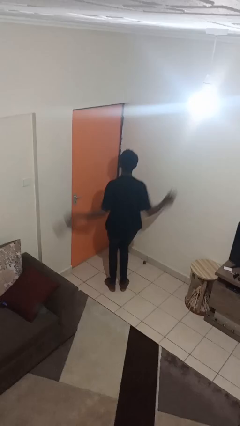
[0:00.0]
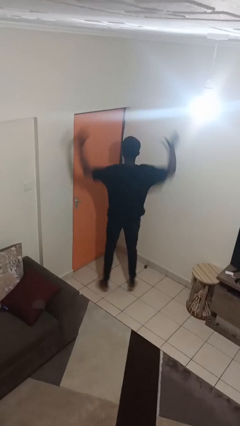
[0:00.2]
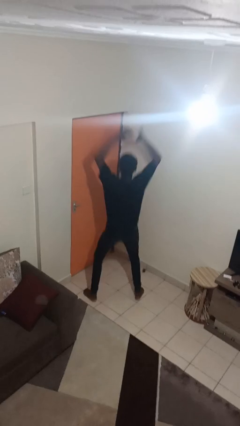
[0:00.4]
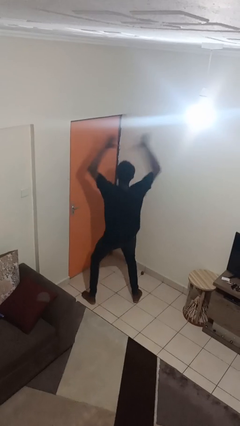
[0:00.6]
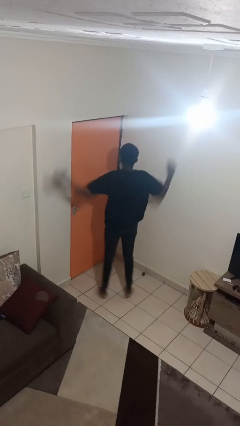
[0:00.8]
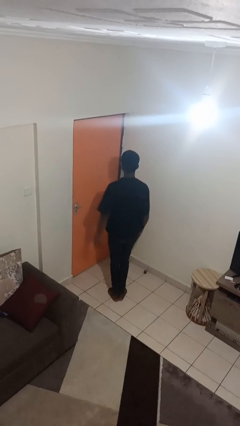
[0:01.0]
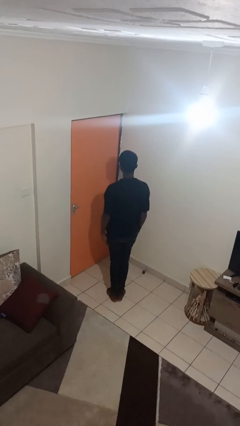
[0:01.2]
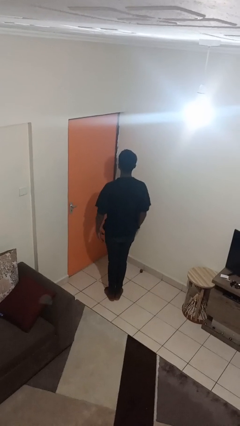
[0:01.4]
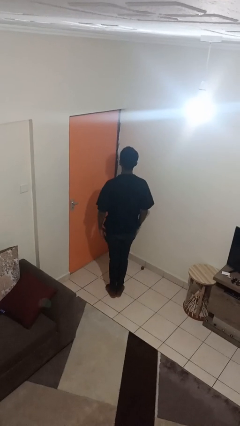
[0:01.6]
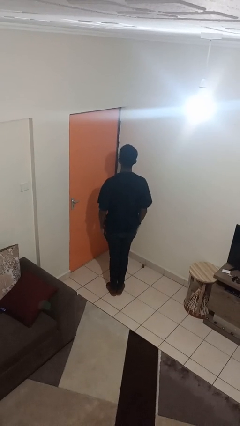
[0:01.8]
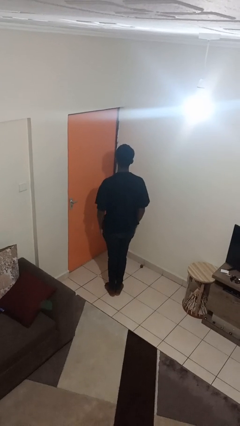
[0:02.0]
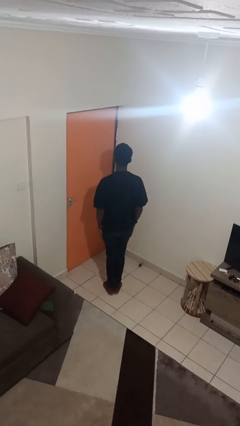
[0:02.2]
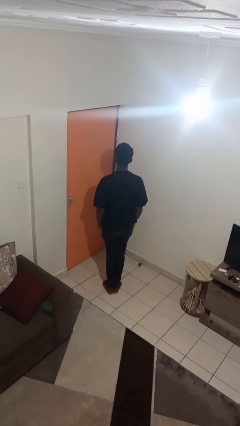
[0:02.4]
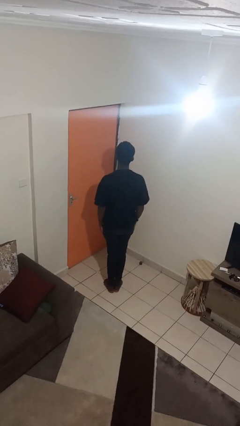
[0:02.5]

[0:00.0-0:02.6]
person exercises with jumping jacks

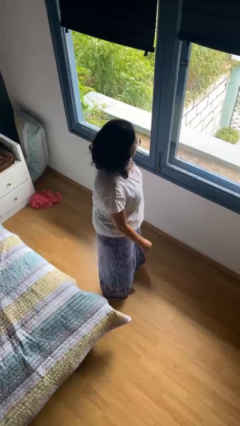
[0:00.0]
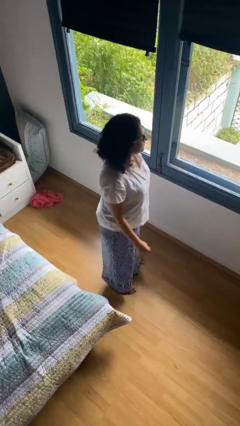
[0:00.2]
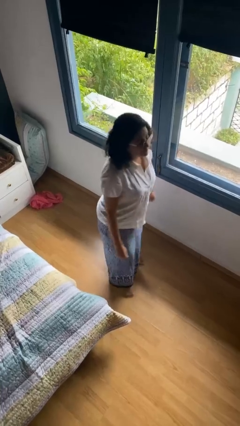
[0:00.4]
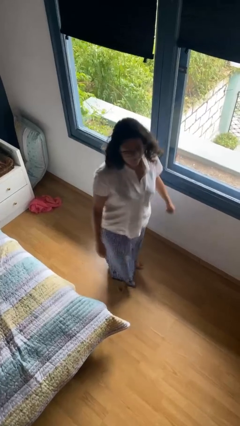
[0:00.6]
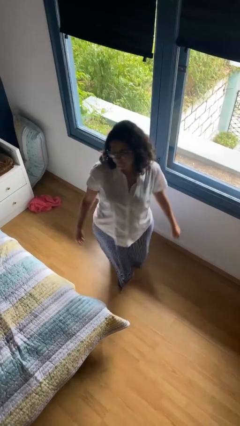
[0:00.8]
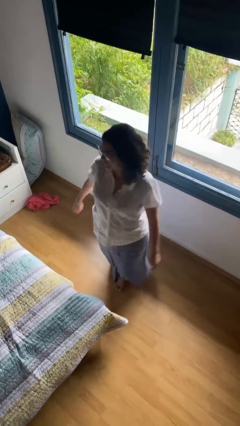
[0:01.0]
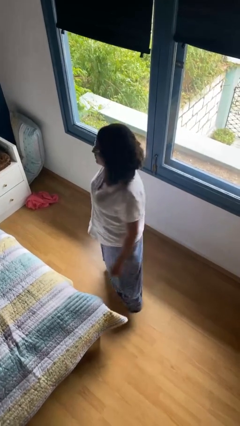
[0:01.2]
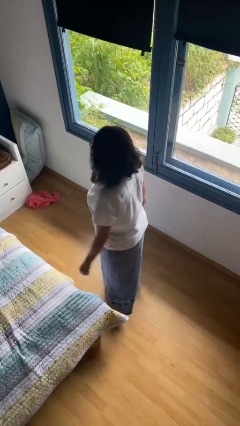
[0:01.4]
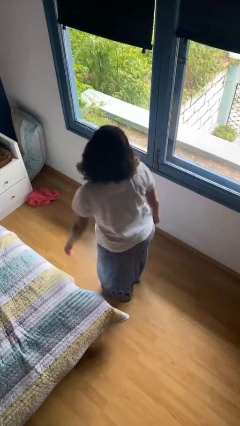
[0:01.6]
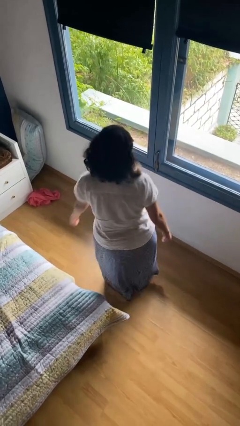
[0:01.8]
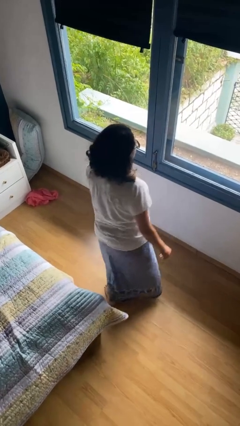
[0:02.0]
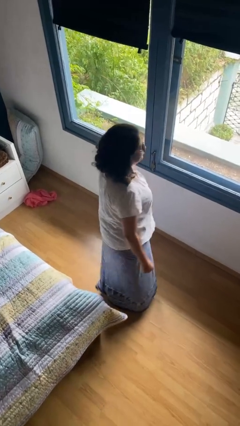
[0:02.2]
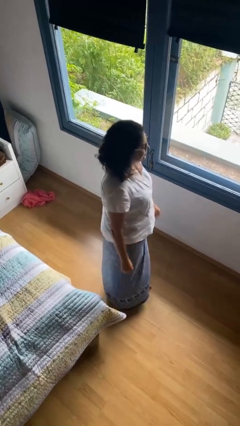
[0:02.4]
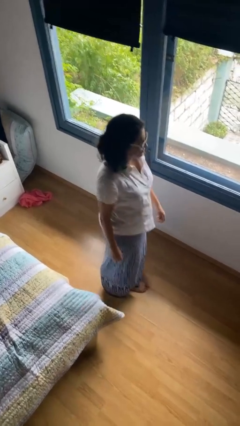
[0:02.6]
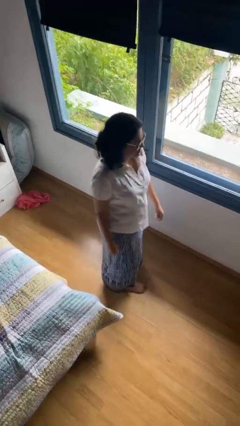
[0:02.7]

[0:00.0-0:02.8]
person twirls

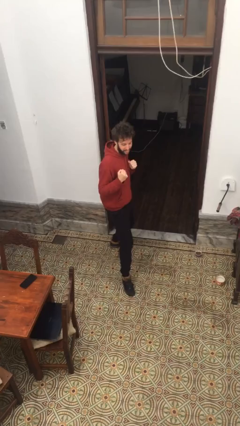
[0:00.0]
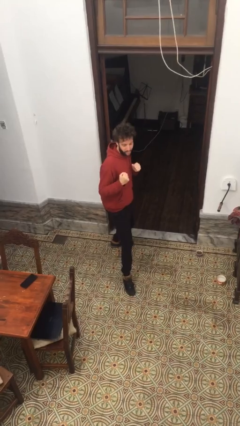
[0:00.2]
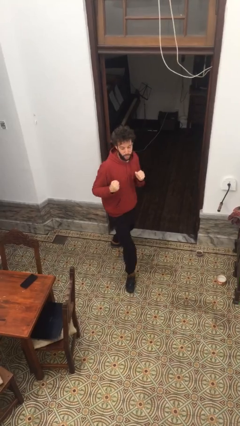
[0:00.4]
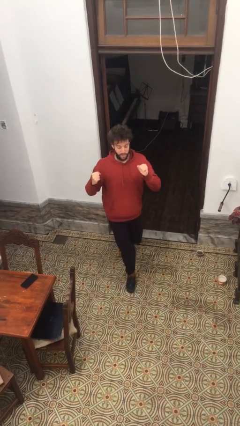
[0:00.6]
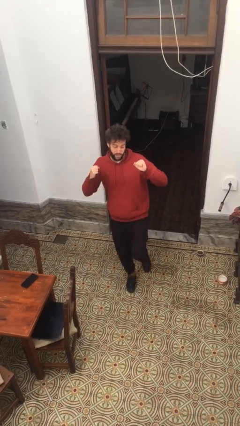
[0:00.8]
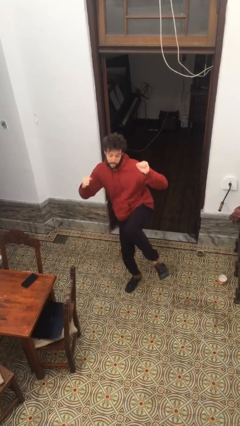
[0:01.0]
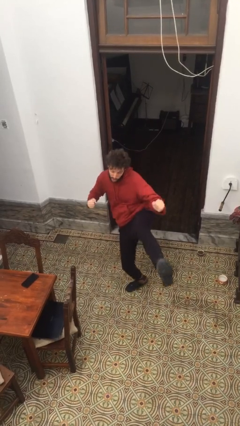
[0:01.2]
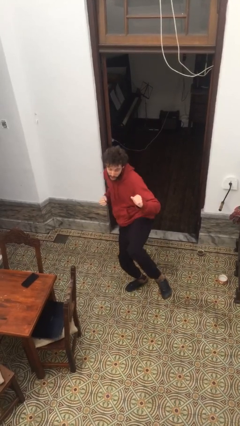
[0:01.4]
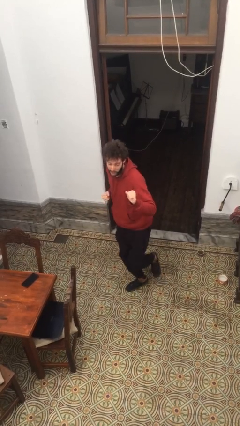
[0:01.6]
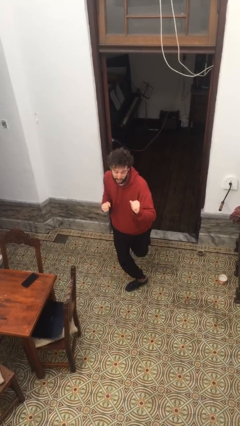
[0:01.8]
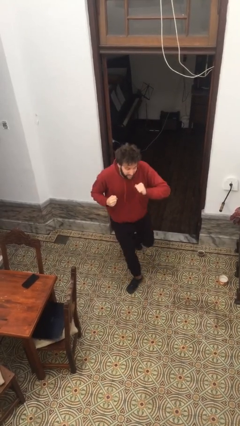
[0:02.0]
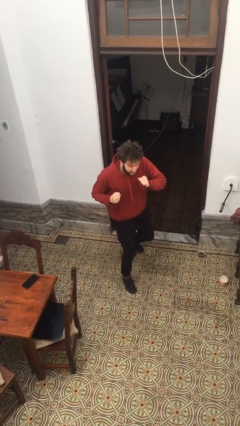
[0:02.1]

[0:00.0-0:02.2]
person karate kicks

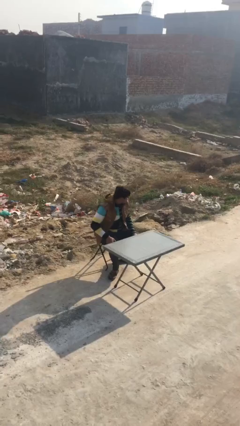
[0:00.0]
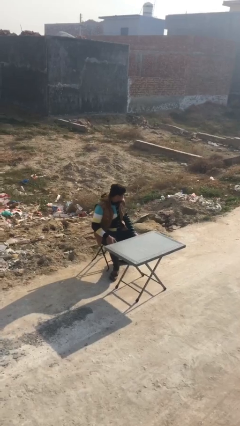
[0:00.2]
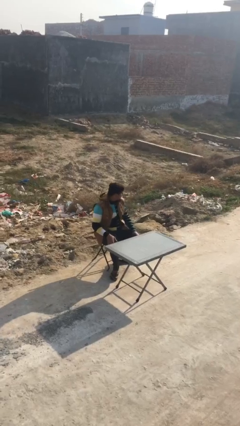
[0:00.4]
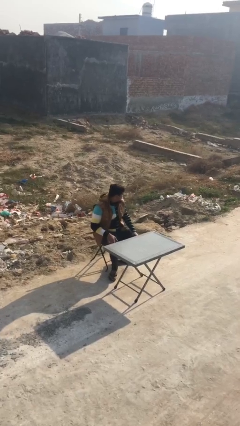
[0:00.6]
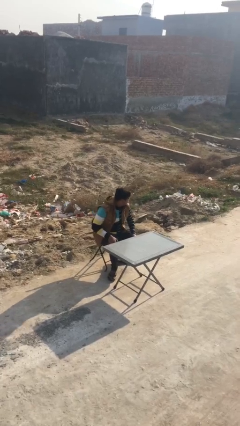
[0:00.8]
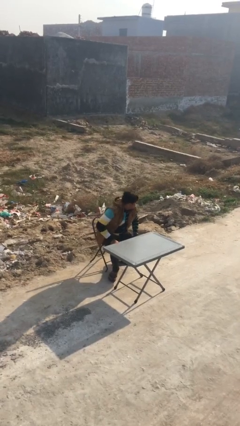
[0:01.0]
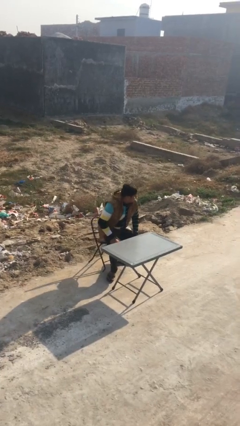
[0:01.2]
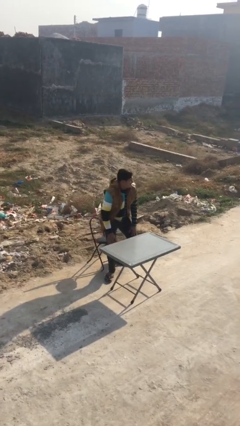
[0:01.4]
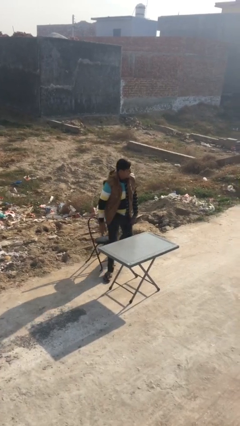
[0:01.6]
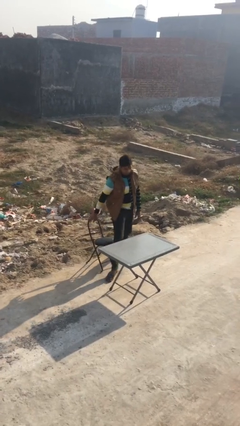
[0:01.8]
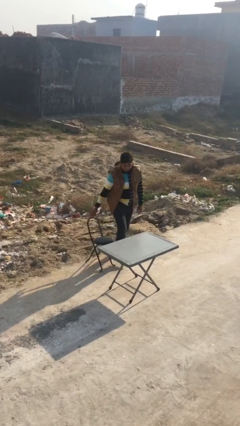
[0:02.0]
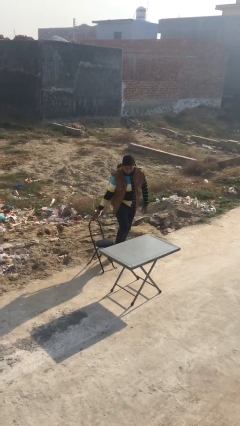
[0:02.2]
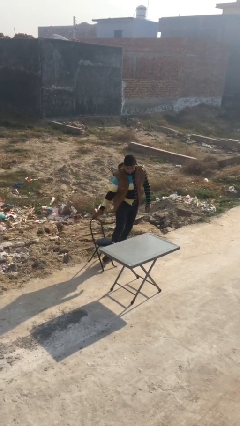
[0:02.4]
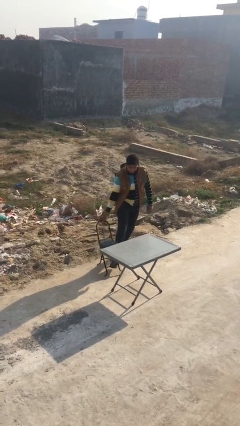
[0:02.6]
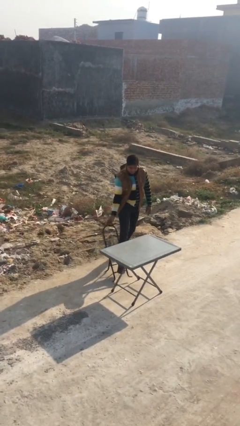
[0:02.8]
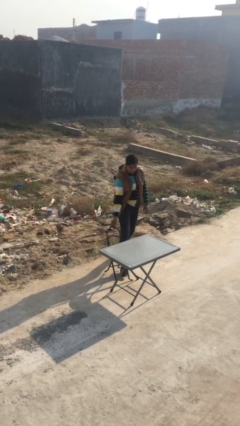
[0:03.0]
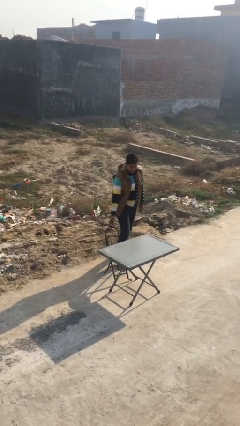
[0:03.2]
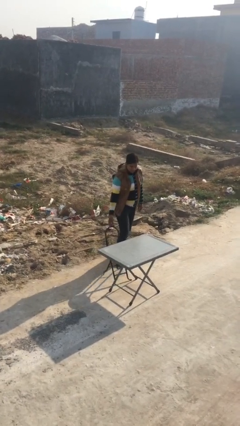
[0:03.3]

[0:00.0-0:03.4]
person stands up

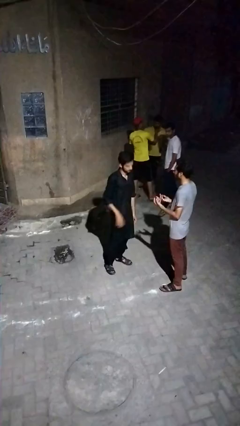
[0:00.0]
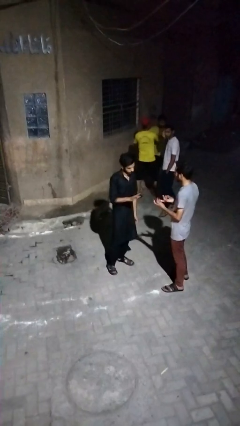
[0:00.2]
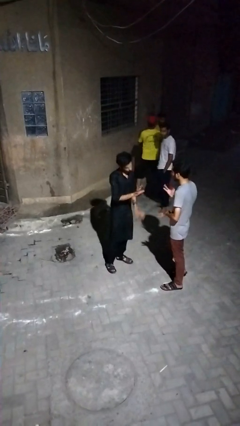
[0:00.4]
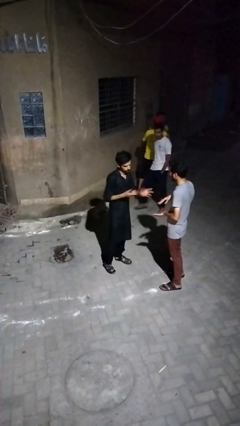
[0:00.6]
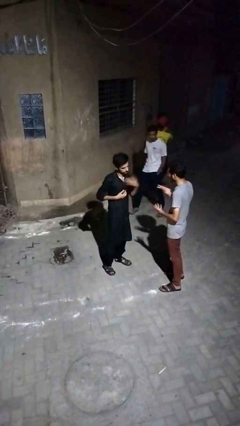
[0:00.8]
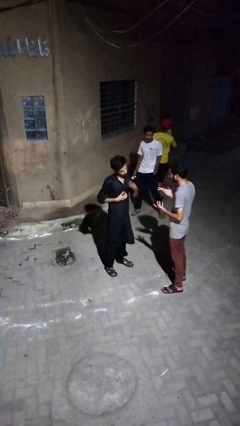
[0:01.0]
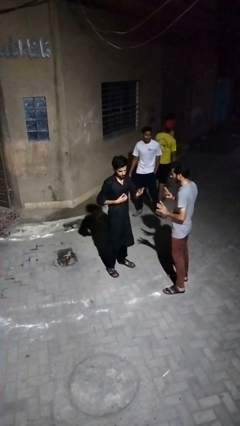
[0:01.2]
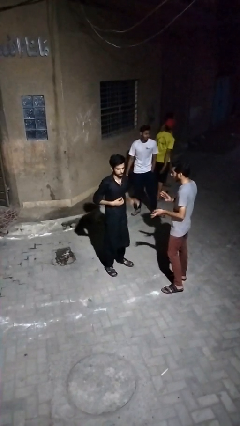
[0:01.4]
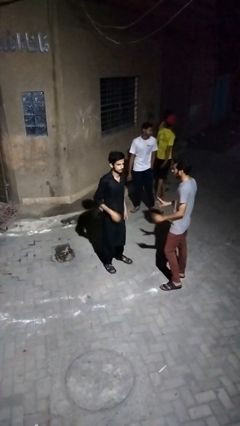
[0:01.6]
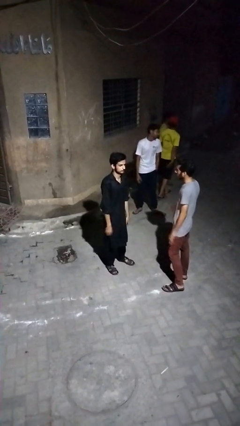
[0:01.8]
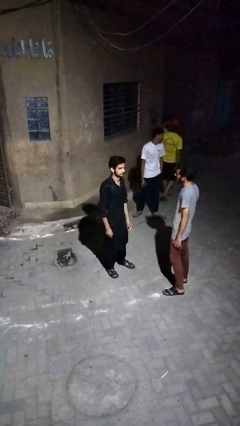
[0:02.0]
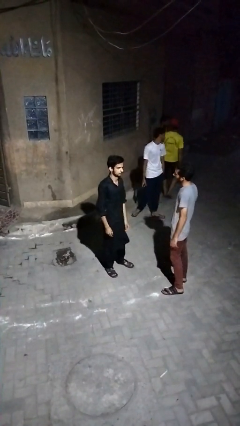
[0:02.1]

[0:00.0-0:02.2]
person talks to person

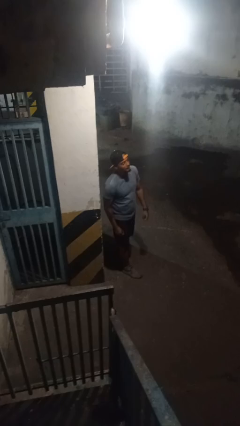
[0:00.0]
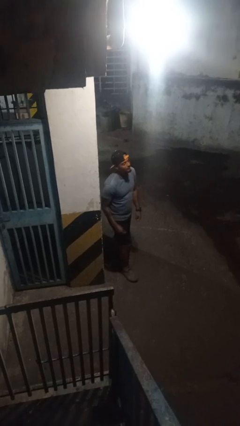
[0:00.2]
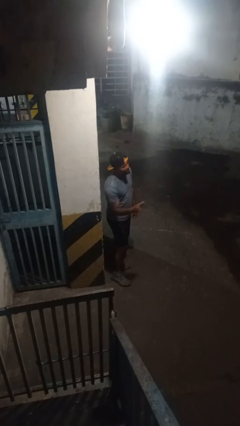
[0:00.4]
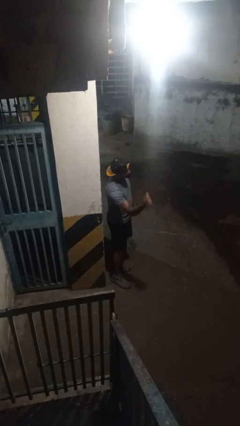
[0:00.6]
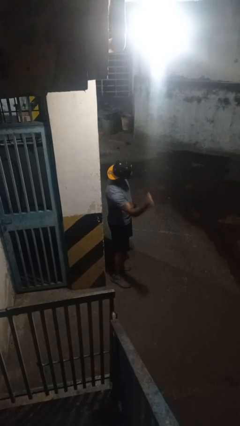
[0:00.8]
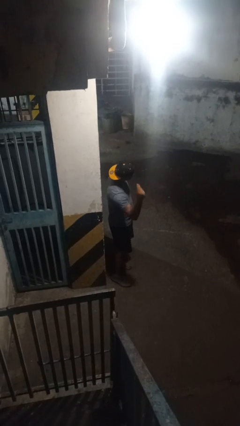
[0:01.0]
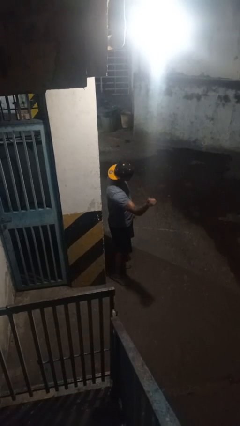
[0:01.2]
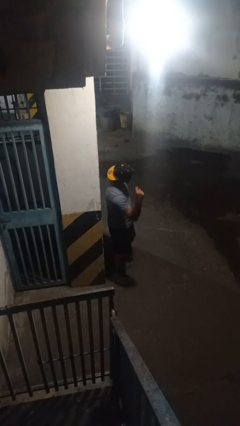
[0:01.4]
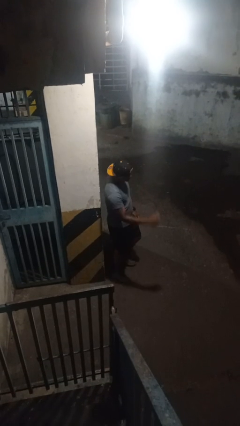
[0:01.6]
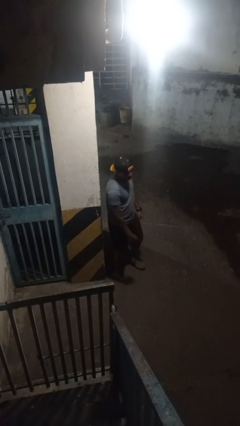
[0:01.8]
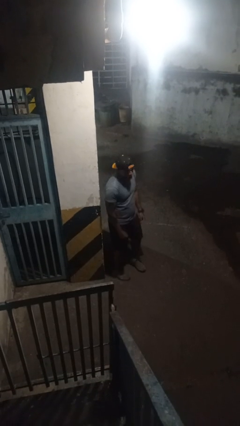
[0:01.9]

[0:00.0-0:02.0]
person snaps fingers

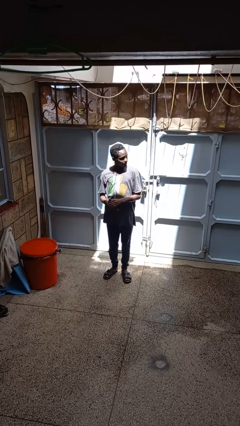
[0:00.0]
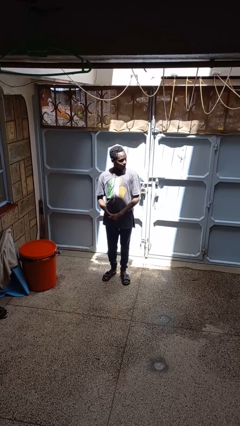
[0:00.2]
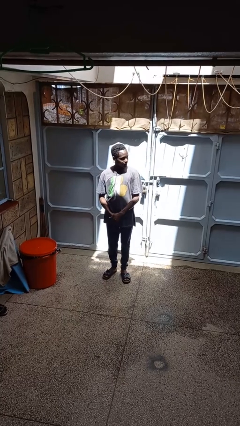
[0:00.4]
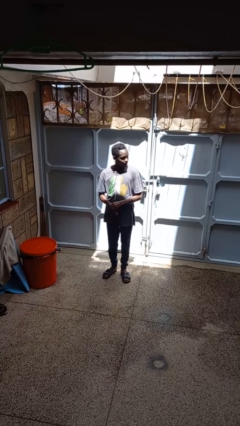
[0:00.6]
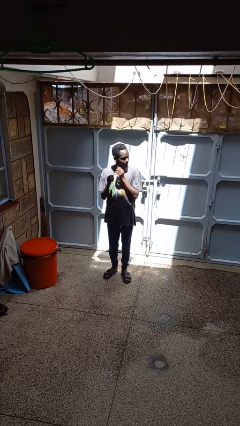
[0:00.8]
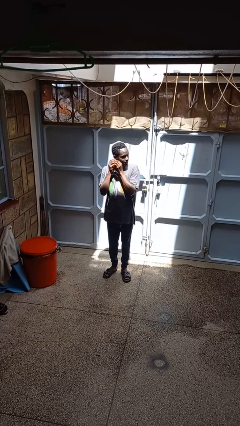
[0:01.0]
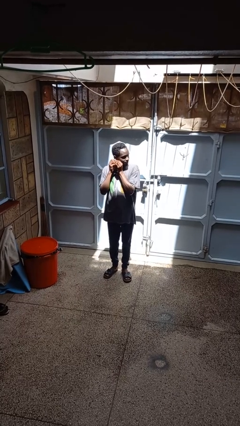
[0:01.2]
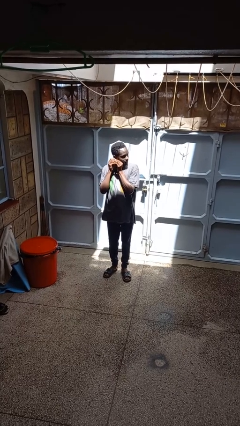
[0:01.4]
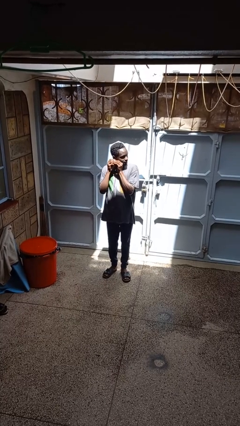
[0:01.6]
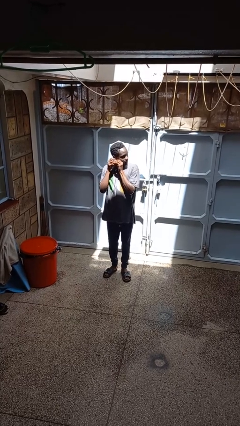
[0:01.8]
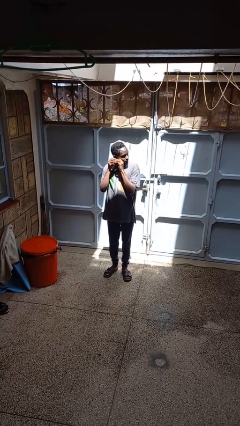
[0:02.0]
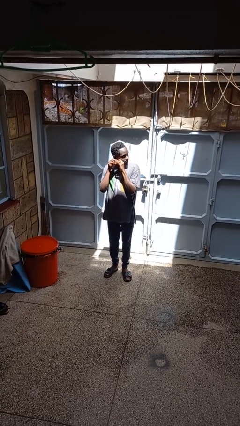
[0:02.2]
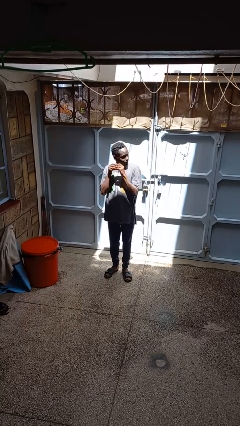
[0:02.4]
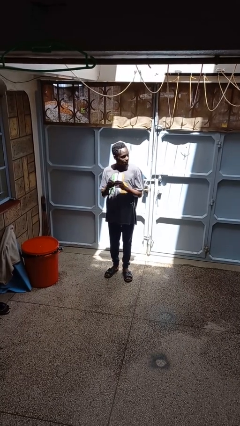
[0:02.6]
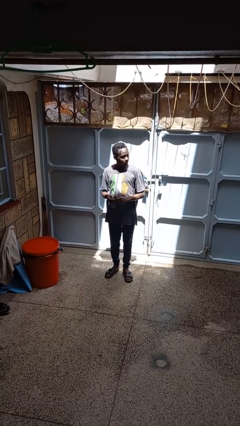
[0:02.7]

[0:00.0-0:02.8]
person takes off earrings
